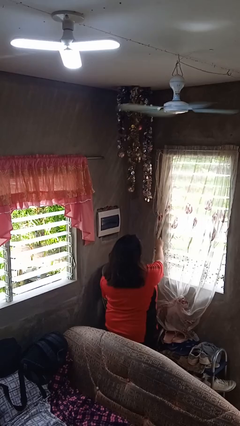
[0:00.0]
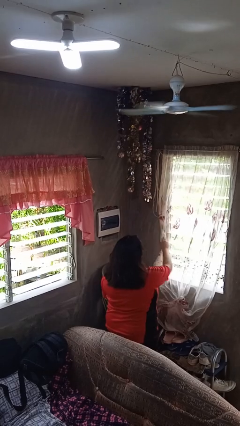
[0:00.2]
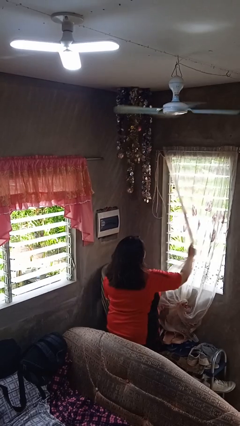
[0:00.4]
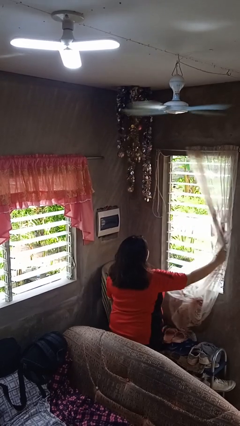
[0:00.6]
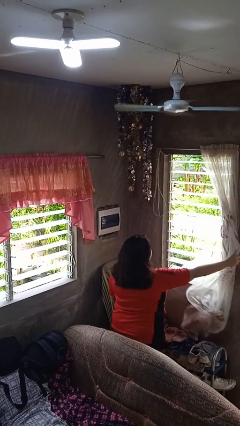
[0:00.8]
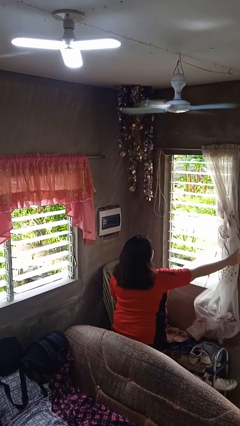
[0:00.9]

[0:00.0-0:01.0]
person opens curtains

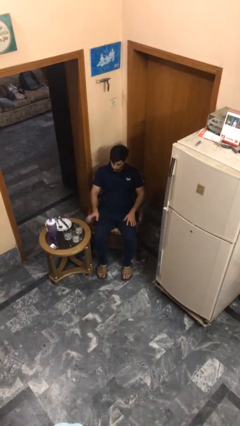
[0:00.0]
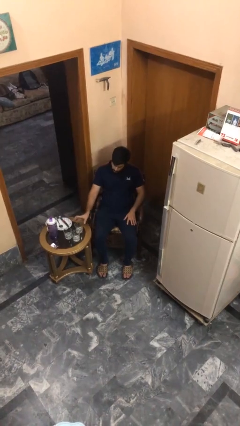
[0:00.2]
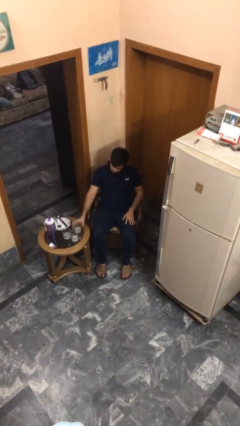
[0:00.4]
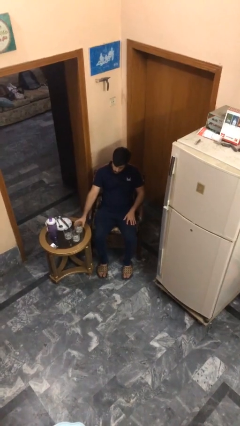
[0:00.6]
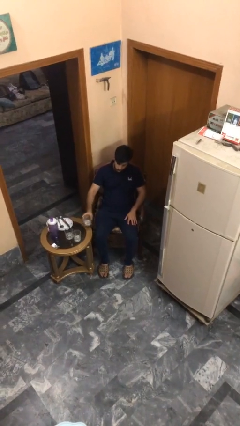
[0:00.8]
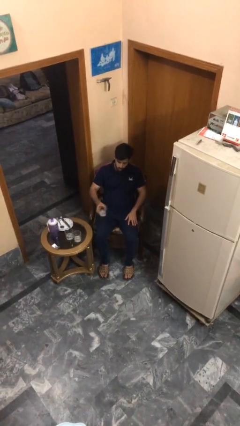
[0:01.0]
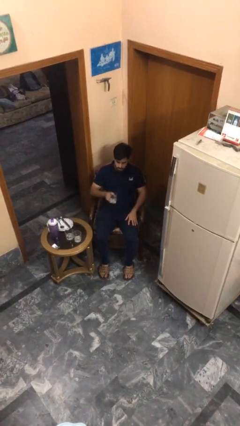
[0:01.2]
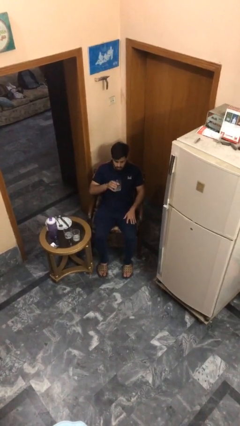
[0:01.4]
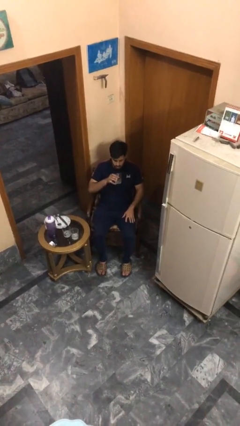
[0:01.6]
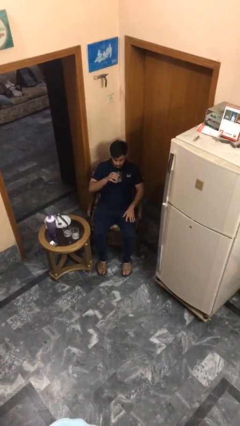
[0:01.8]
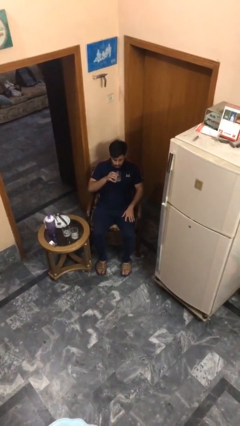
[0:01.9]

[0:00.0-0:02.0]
person picks up object from table

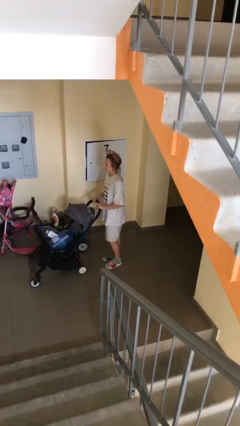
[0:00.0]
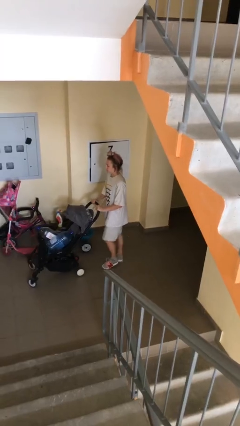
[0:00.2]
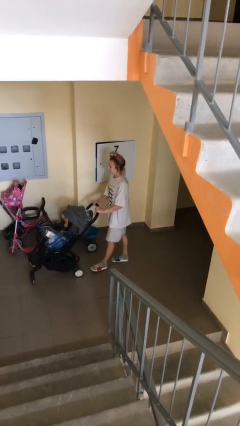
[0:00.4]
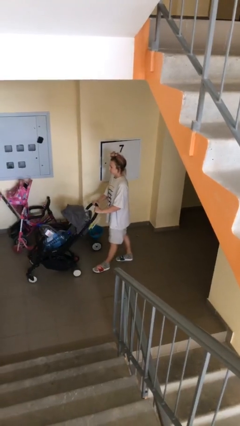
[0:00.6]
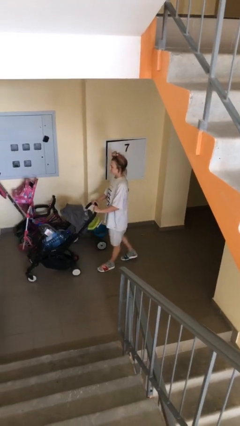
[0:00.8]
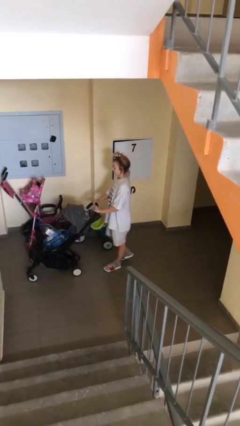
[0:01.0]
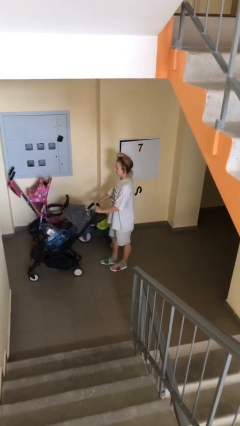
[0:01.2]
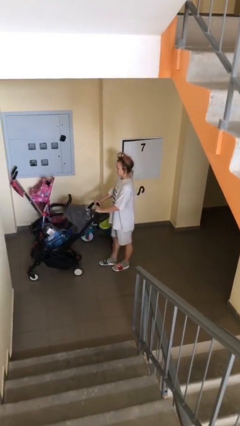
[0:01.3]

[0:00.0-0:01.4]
person pushes wheeled cart

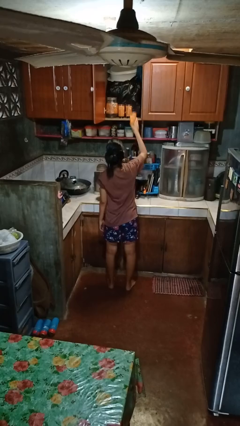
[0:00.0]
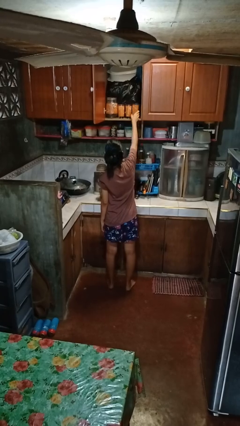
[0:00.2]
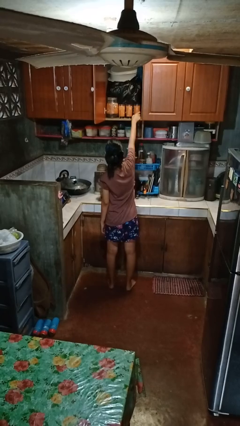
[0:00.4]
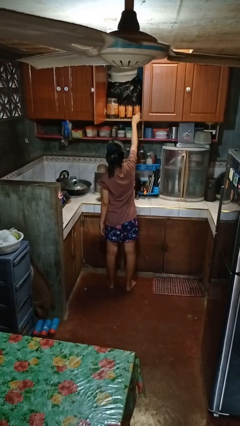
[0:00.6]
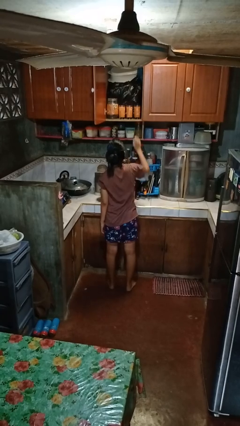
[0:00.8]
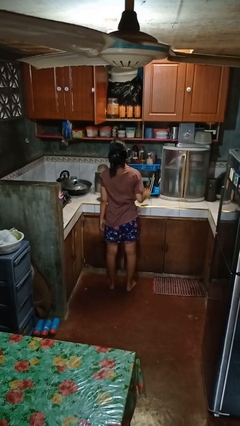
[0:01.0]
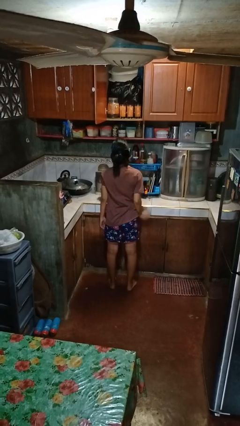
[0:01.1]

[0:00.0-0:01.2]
person puts object in cabinet

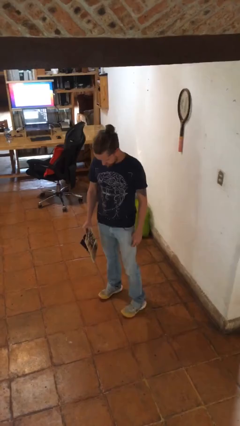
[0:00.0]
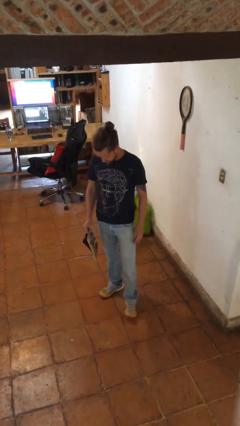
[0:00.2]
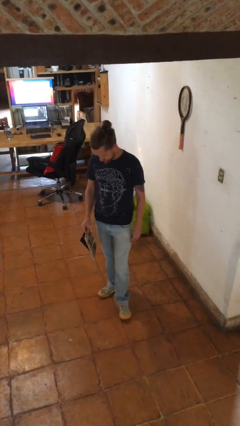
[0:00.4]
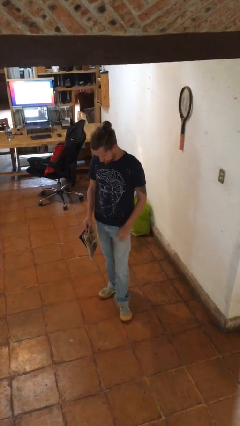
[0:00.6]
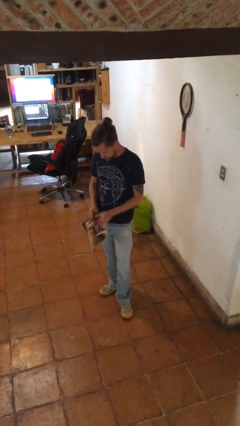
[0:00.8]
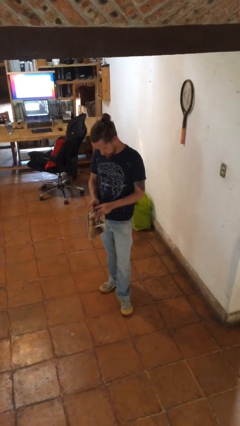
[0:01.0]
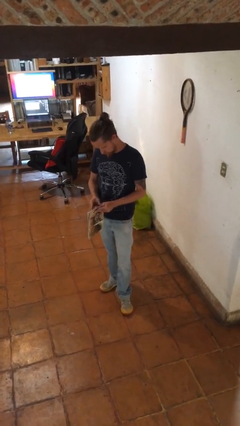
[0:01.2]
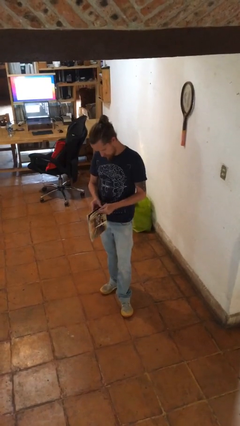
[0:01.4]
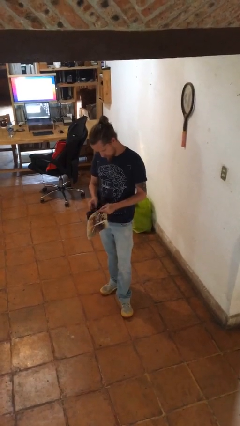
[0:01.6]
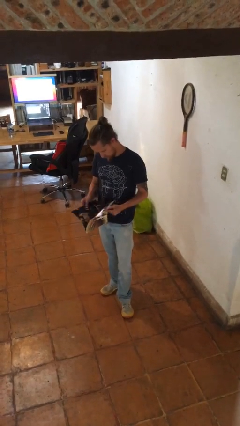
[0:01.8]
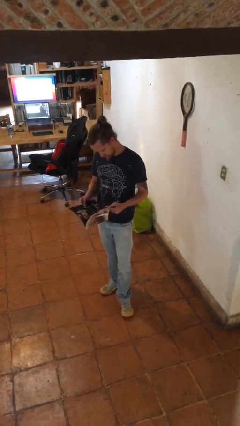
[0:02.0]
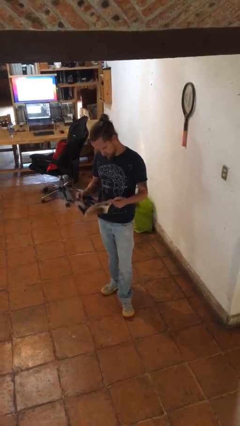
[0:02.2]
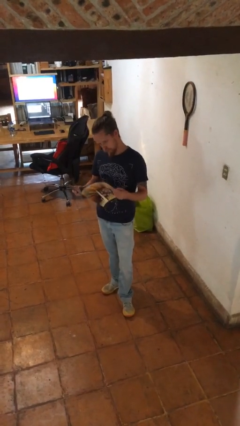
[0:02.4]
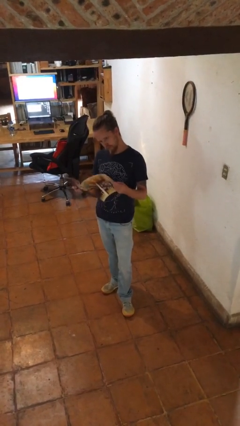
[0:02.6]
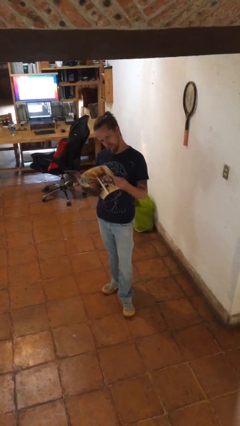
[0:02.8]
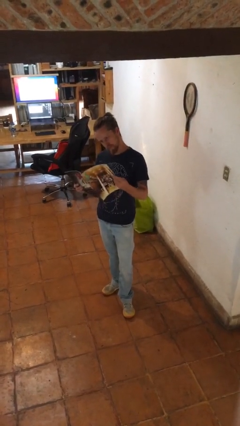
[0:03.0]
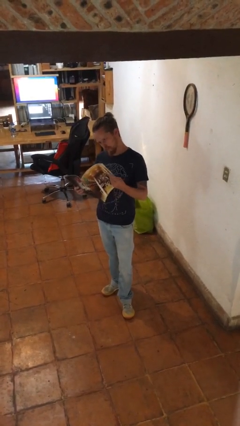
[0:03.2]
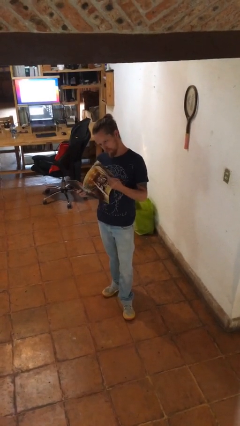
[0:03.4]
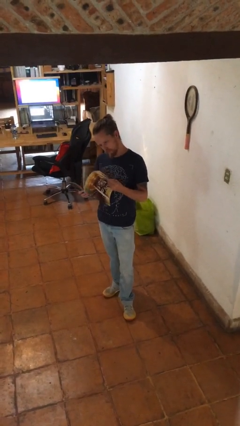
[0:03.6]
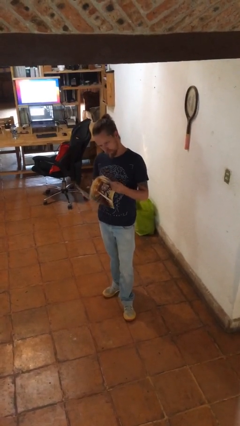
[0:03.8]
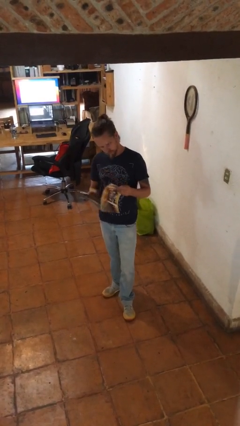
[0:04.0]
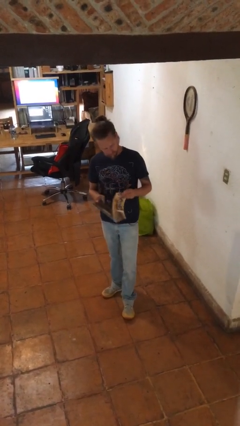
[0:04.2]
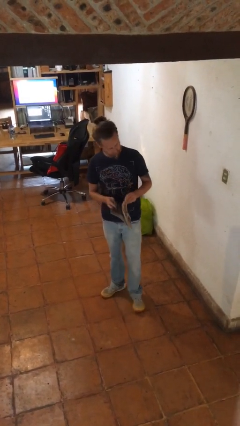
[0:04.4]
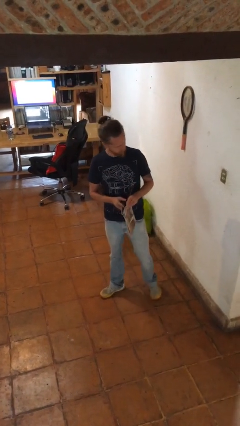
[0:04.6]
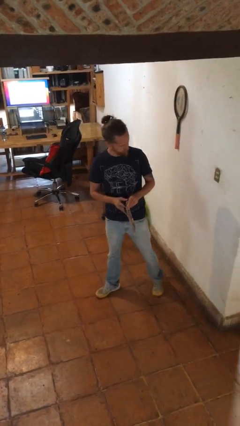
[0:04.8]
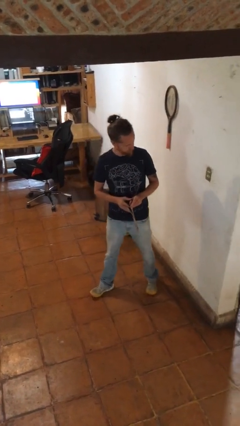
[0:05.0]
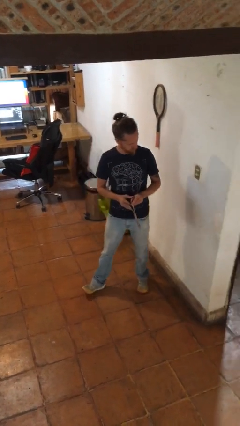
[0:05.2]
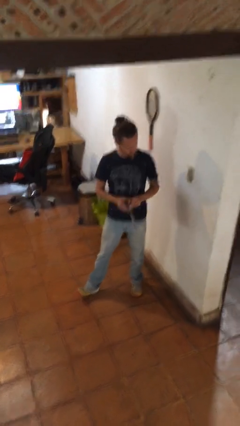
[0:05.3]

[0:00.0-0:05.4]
person reads magazine

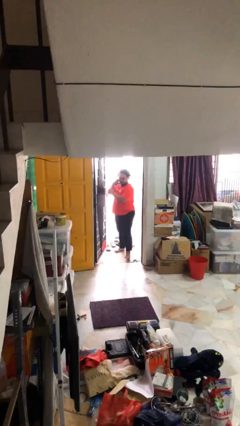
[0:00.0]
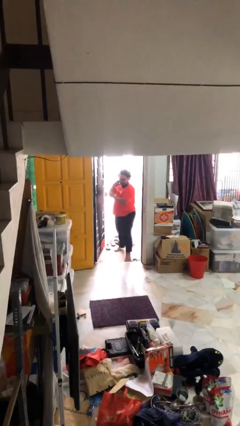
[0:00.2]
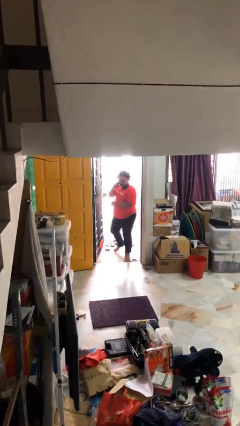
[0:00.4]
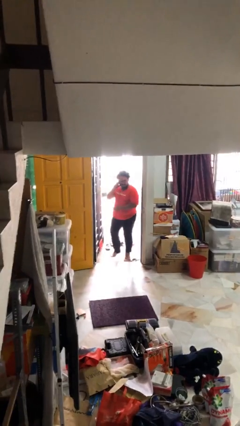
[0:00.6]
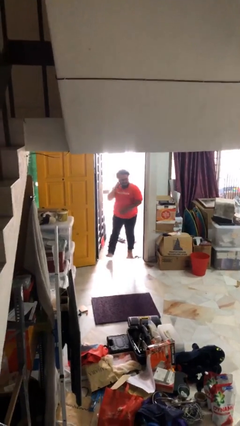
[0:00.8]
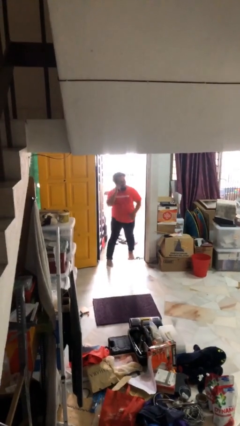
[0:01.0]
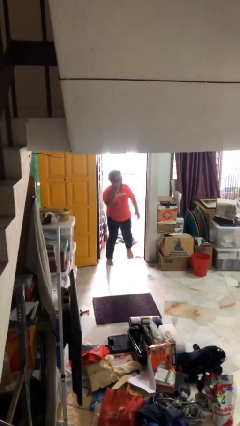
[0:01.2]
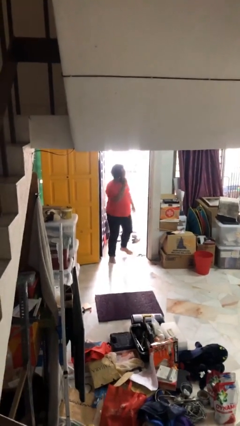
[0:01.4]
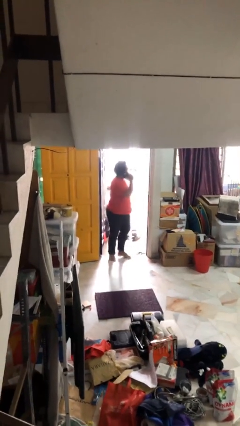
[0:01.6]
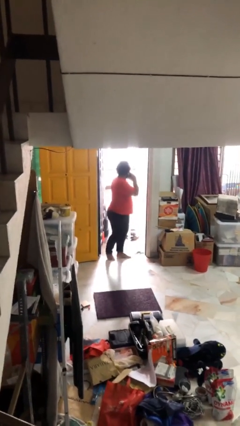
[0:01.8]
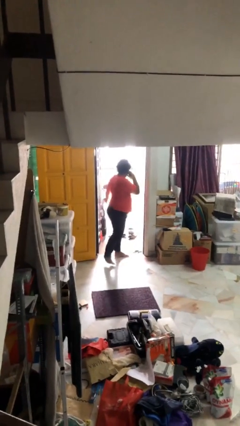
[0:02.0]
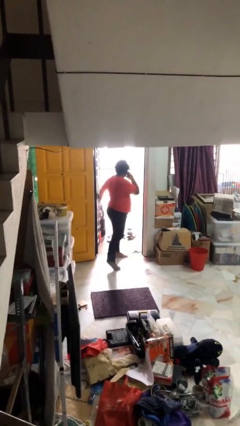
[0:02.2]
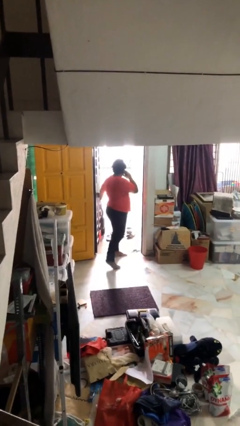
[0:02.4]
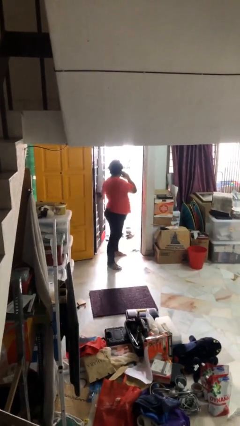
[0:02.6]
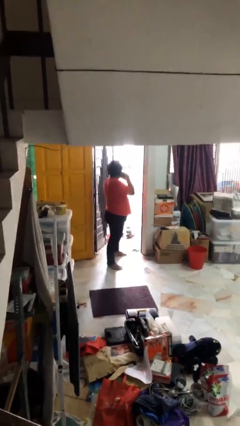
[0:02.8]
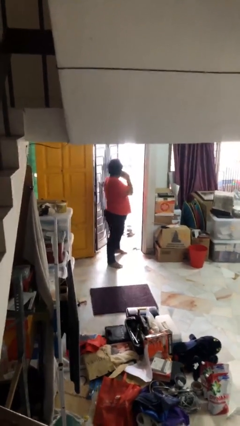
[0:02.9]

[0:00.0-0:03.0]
person enters scene through structure

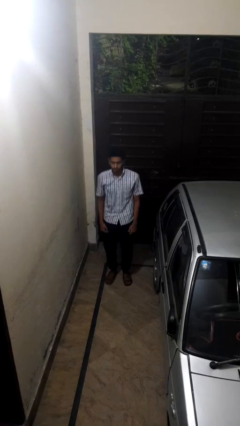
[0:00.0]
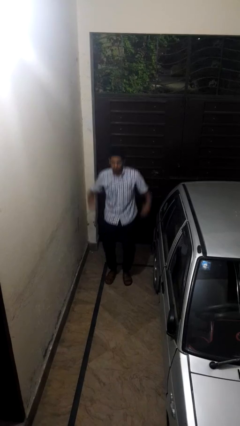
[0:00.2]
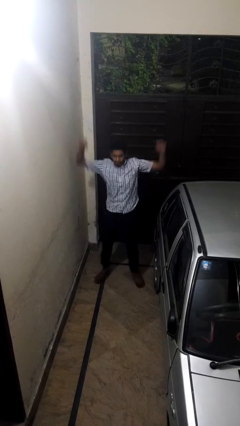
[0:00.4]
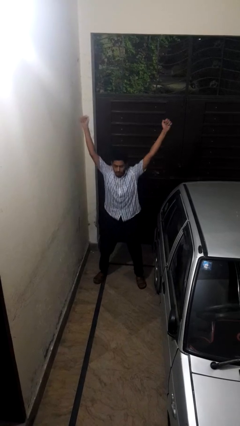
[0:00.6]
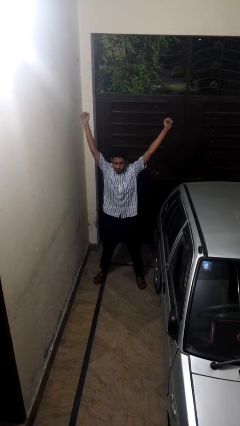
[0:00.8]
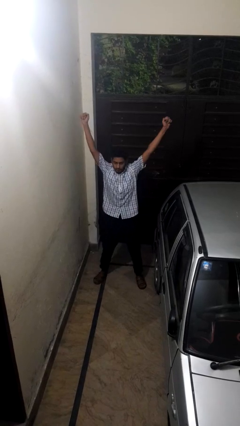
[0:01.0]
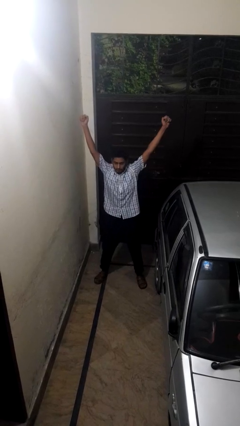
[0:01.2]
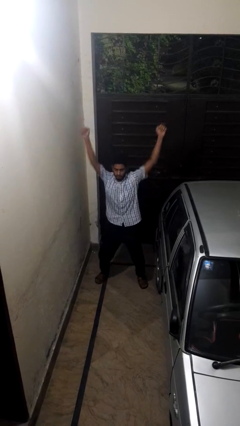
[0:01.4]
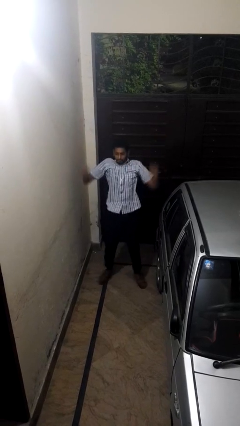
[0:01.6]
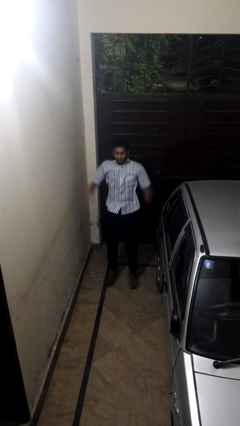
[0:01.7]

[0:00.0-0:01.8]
person exercises with jumping jacks

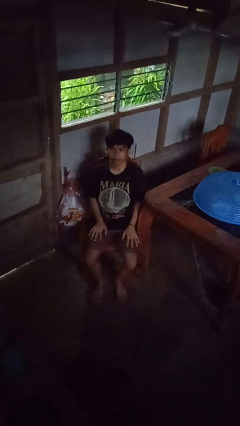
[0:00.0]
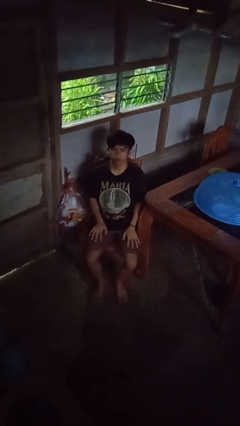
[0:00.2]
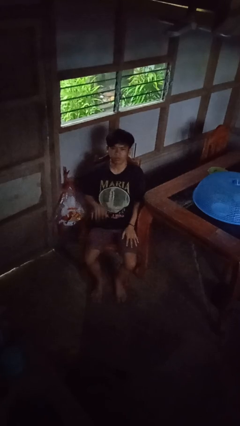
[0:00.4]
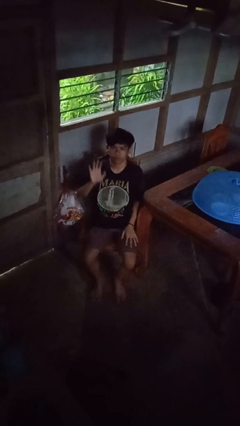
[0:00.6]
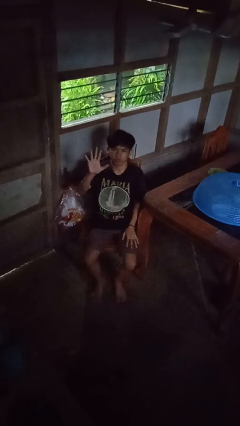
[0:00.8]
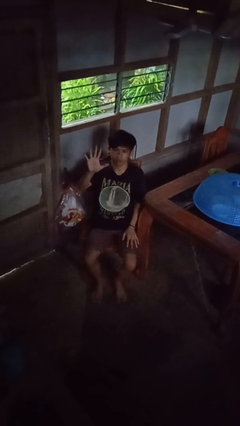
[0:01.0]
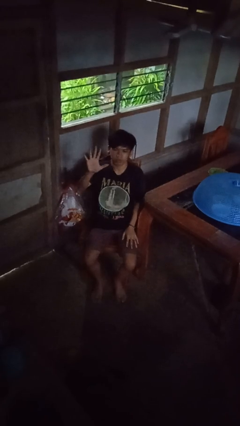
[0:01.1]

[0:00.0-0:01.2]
person gestures number five
